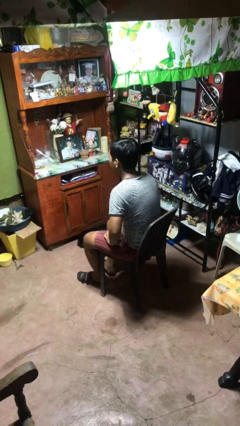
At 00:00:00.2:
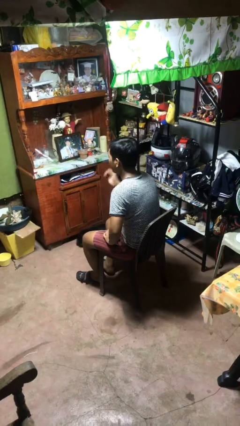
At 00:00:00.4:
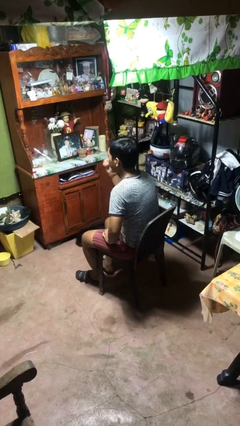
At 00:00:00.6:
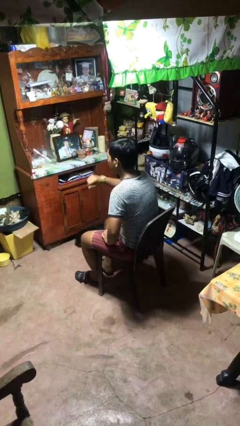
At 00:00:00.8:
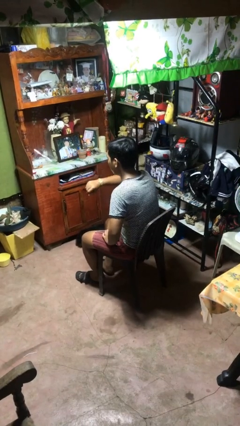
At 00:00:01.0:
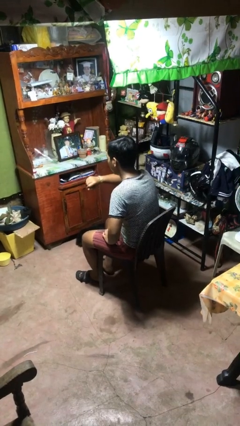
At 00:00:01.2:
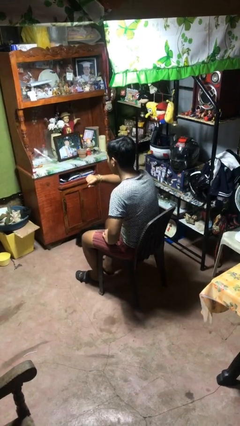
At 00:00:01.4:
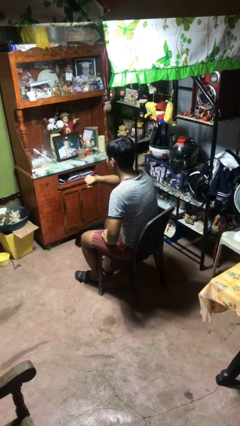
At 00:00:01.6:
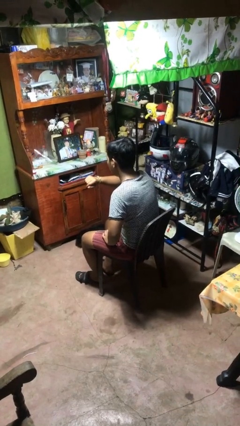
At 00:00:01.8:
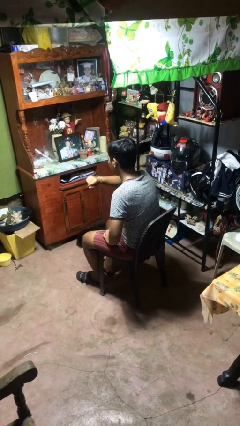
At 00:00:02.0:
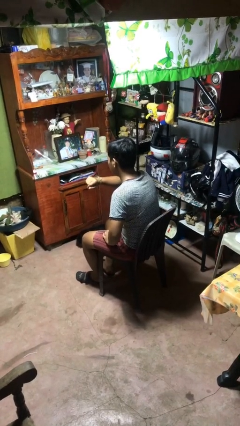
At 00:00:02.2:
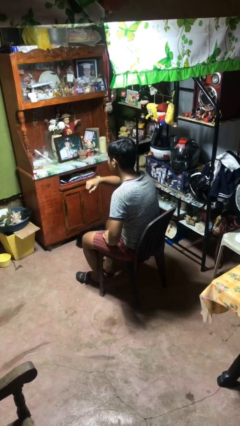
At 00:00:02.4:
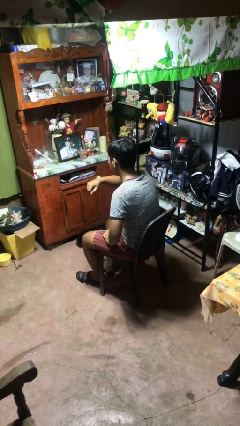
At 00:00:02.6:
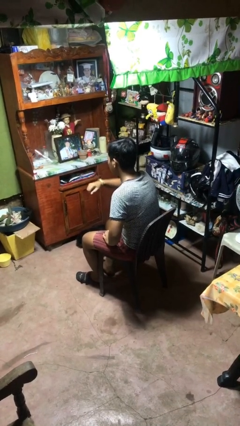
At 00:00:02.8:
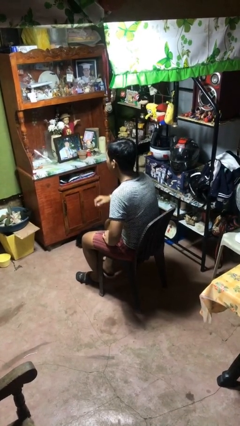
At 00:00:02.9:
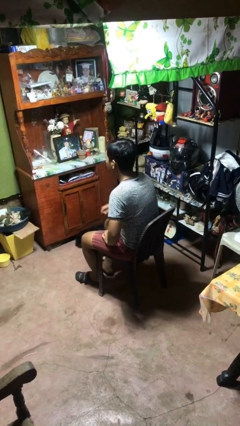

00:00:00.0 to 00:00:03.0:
person looks at wristwatch

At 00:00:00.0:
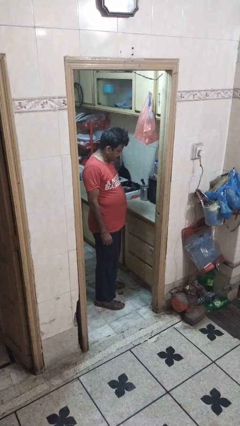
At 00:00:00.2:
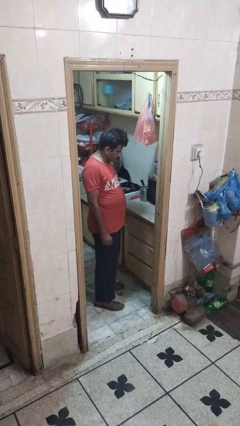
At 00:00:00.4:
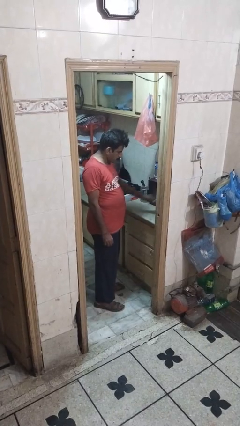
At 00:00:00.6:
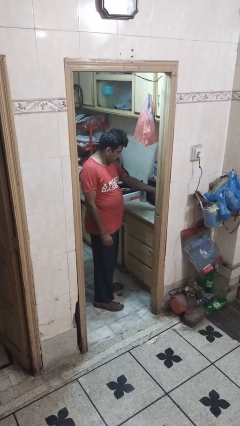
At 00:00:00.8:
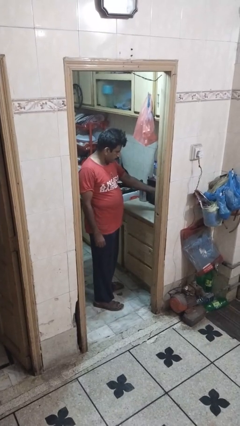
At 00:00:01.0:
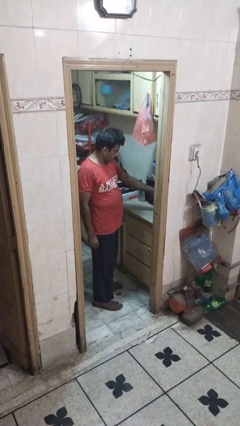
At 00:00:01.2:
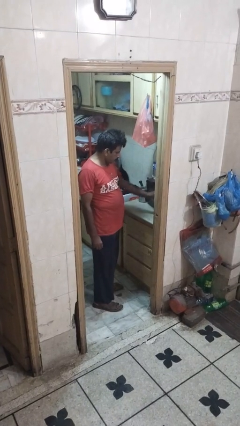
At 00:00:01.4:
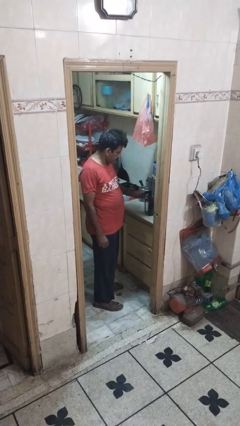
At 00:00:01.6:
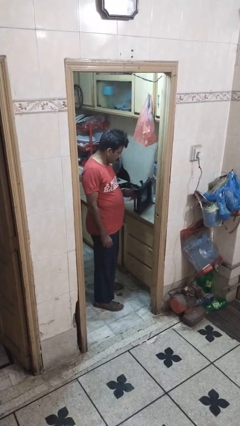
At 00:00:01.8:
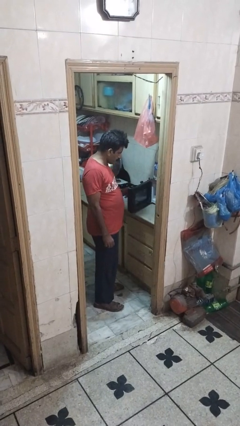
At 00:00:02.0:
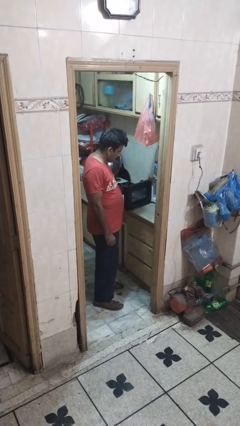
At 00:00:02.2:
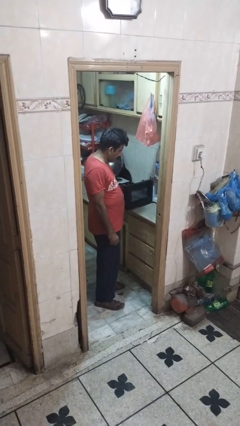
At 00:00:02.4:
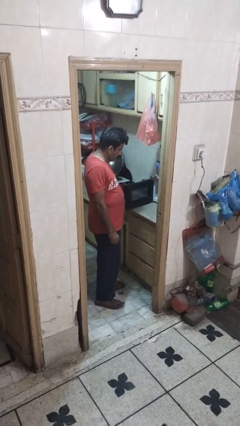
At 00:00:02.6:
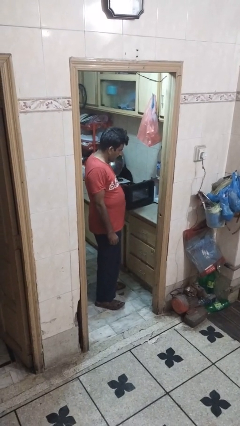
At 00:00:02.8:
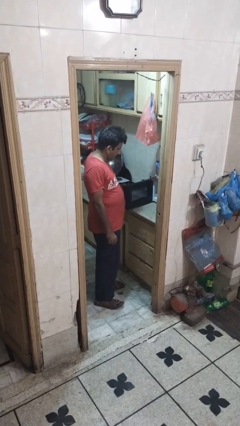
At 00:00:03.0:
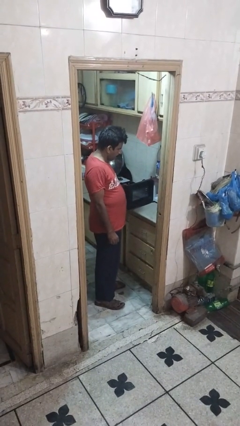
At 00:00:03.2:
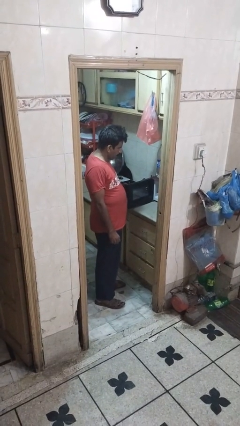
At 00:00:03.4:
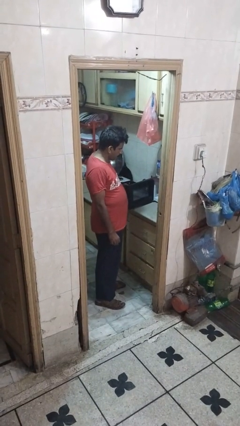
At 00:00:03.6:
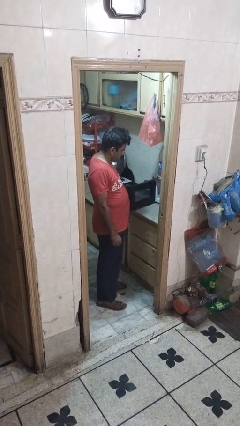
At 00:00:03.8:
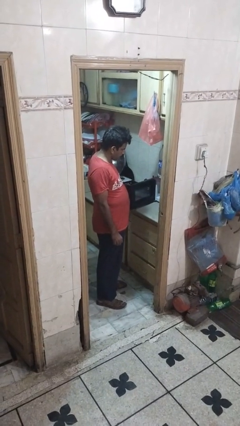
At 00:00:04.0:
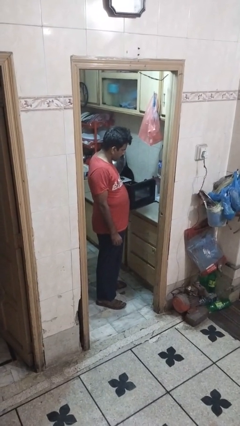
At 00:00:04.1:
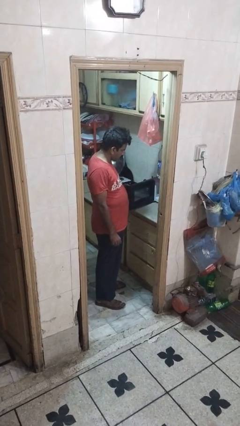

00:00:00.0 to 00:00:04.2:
person opens oven door

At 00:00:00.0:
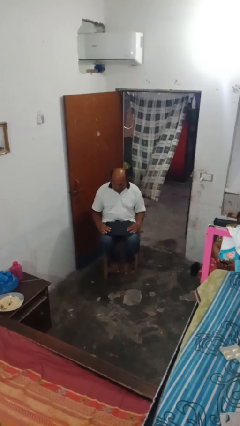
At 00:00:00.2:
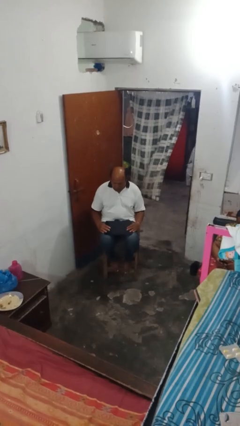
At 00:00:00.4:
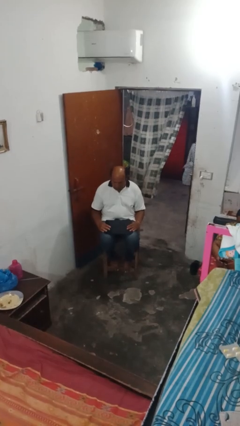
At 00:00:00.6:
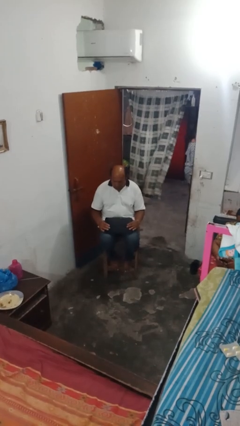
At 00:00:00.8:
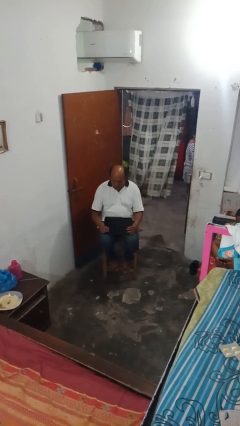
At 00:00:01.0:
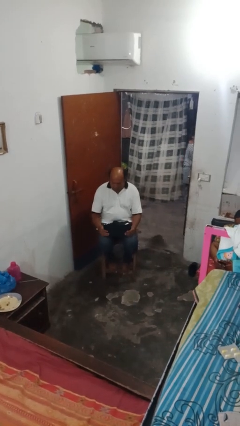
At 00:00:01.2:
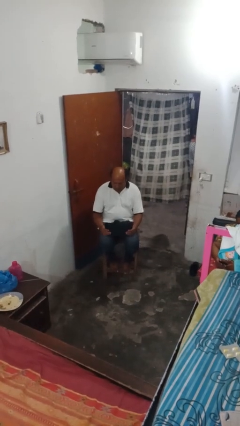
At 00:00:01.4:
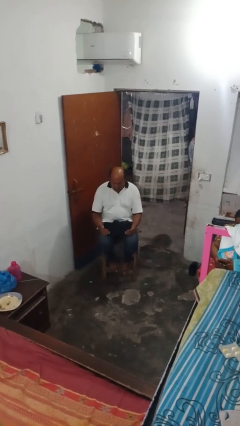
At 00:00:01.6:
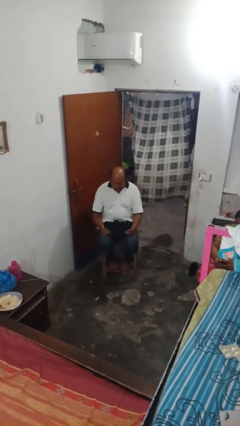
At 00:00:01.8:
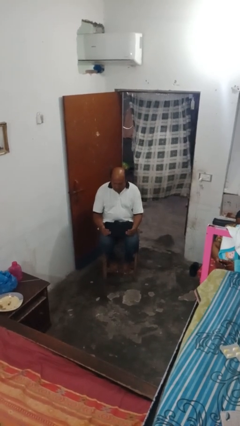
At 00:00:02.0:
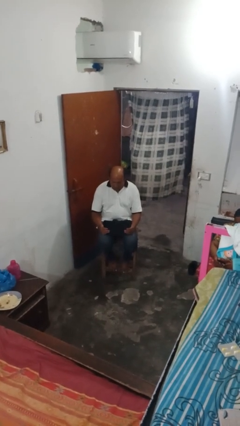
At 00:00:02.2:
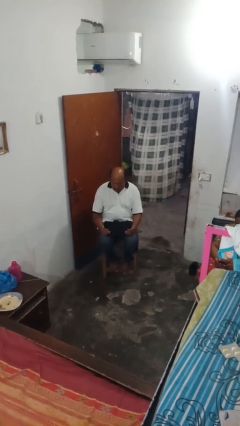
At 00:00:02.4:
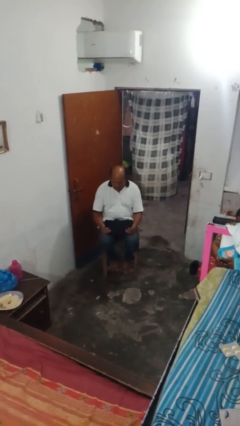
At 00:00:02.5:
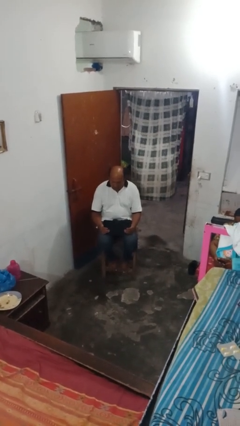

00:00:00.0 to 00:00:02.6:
person opens laptop

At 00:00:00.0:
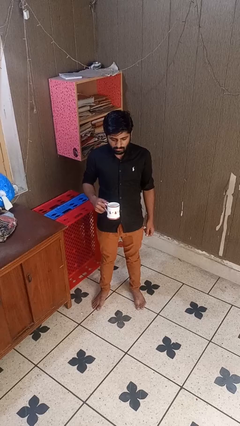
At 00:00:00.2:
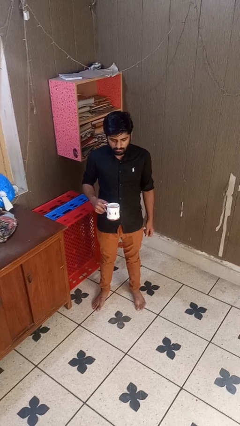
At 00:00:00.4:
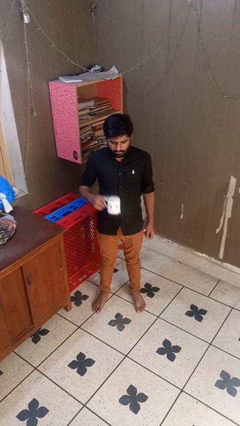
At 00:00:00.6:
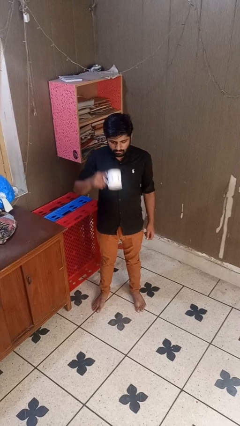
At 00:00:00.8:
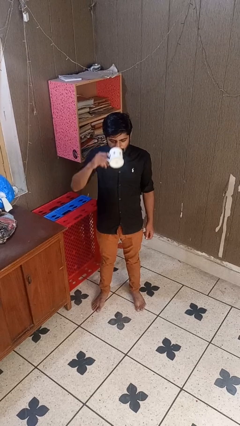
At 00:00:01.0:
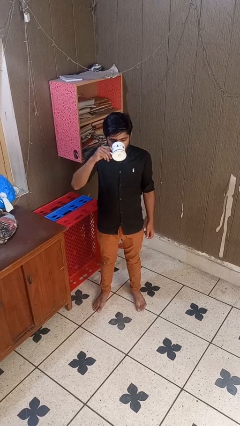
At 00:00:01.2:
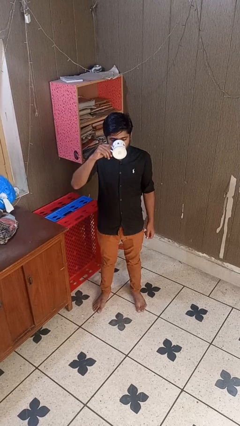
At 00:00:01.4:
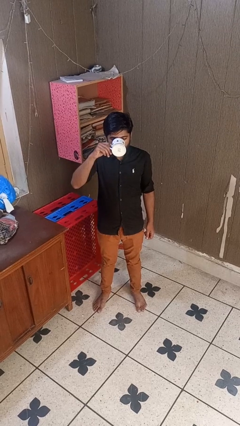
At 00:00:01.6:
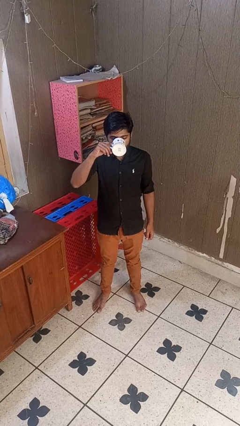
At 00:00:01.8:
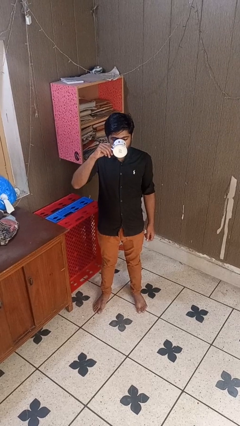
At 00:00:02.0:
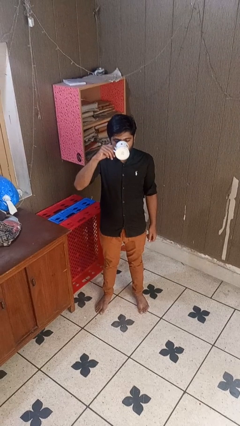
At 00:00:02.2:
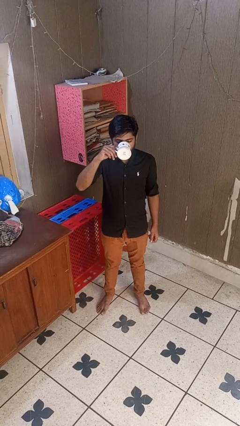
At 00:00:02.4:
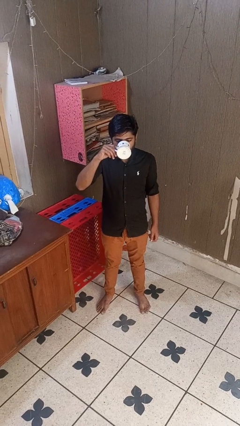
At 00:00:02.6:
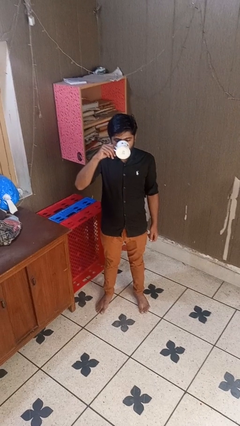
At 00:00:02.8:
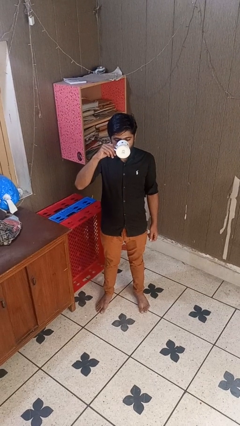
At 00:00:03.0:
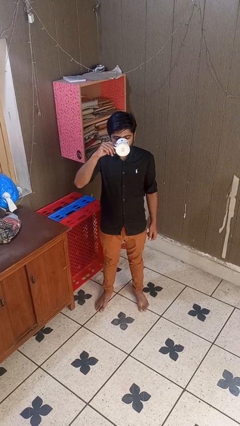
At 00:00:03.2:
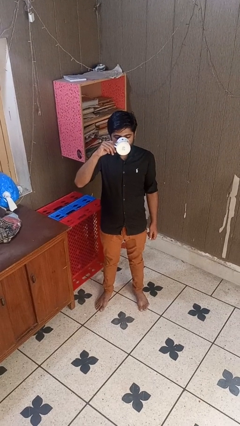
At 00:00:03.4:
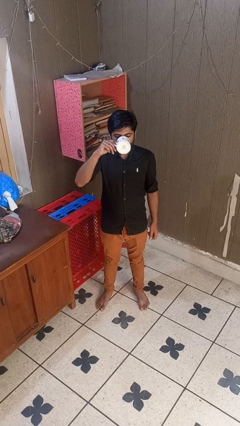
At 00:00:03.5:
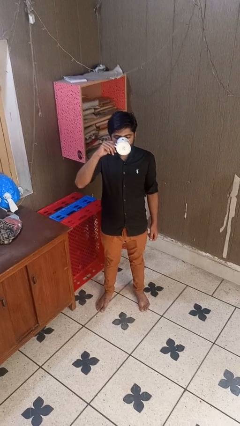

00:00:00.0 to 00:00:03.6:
person drinks from mug

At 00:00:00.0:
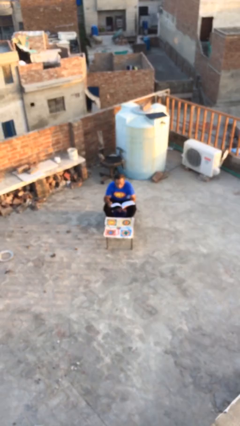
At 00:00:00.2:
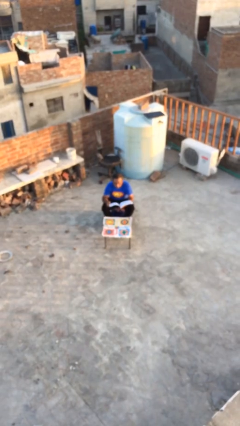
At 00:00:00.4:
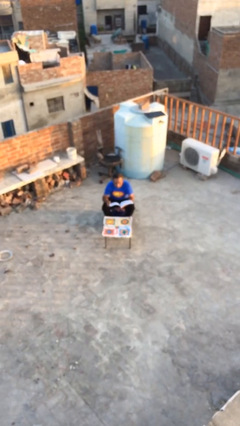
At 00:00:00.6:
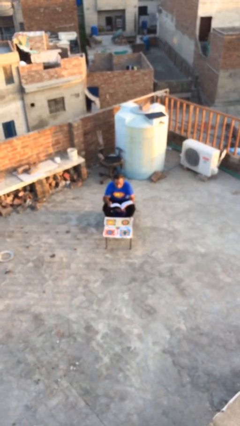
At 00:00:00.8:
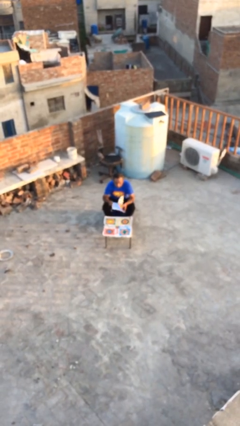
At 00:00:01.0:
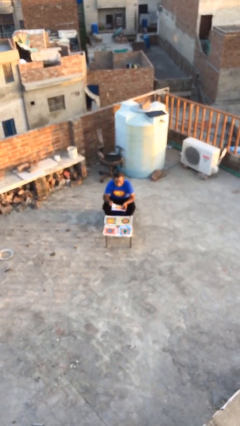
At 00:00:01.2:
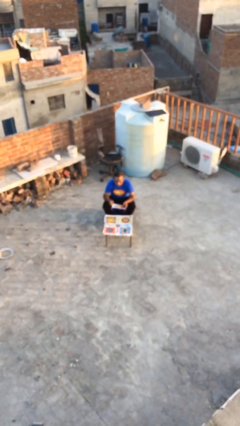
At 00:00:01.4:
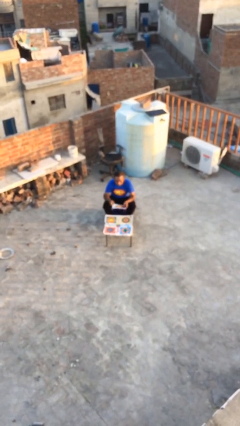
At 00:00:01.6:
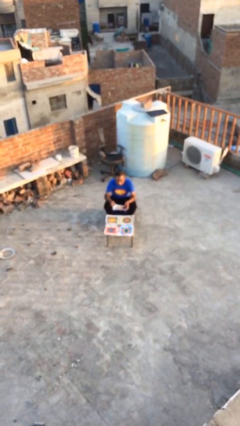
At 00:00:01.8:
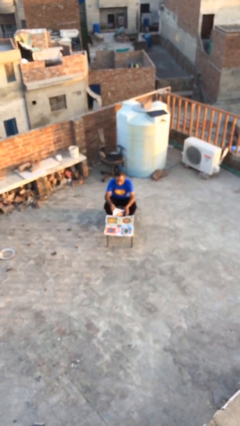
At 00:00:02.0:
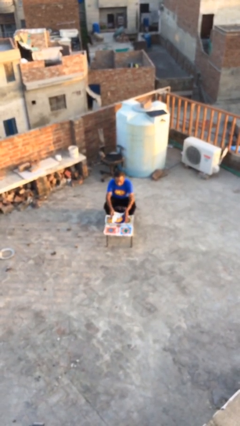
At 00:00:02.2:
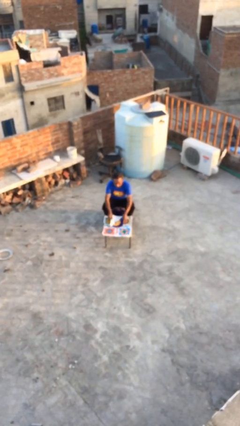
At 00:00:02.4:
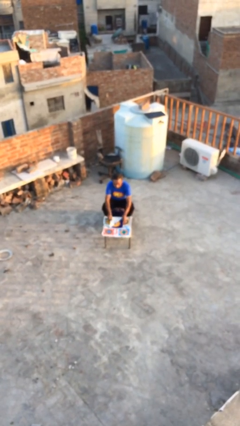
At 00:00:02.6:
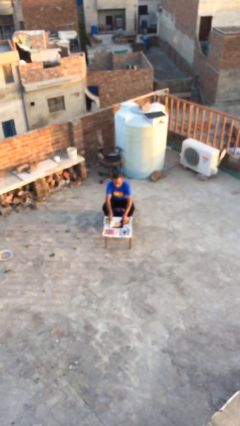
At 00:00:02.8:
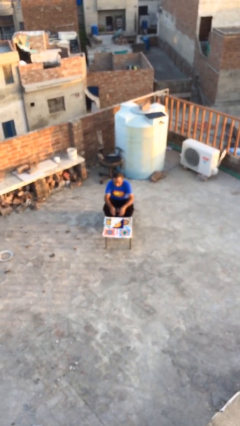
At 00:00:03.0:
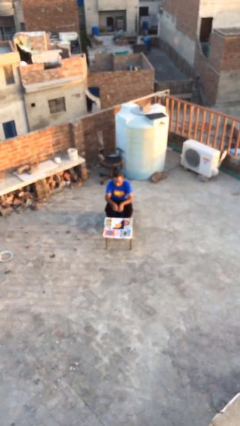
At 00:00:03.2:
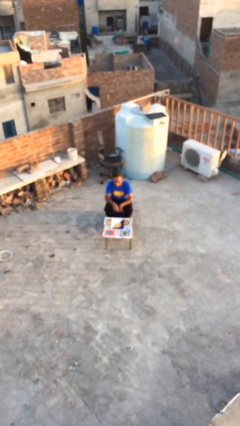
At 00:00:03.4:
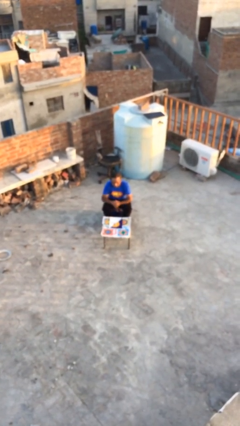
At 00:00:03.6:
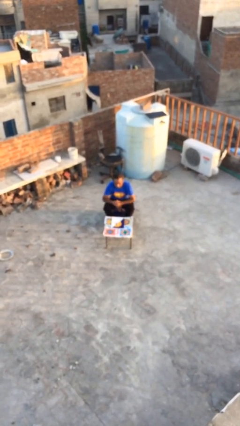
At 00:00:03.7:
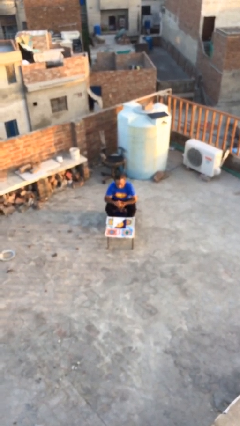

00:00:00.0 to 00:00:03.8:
person puts down object on table
